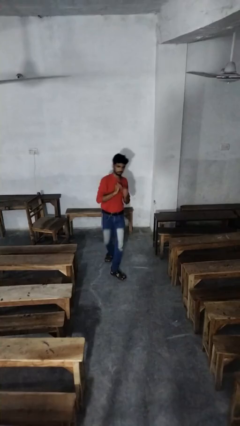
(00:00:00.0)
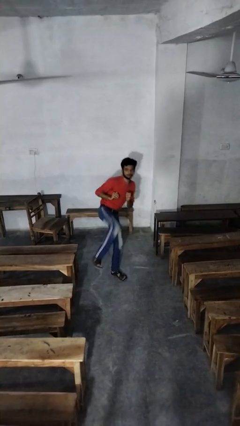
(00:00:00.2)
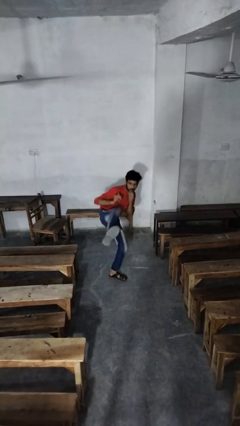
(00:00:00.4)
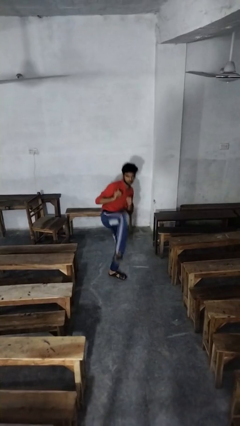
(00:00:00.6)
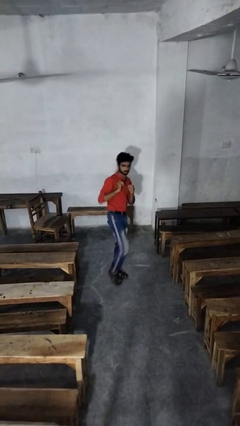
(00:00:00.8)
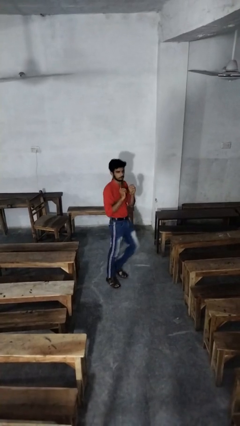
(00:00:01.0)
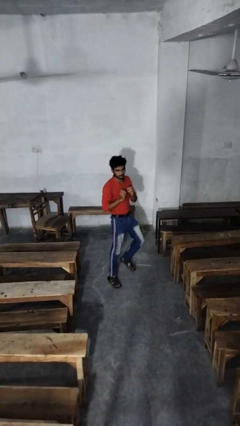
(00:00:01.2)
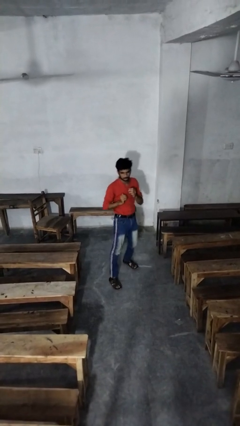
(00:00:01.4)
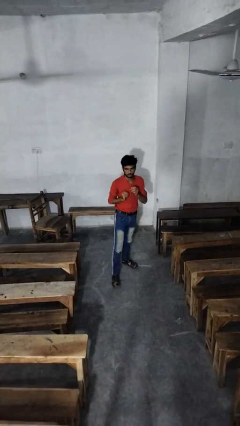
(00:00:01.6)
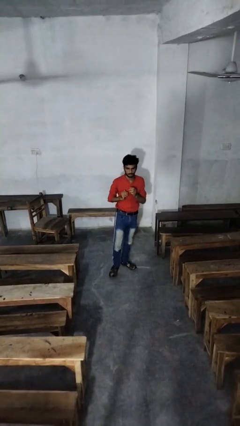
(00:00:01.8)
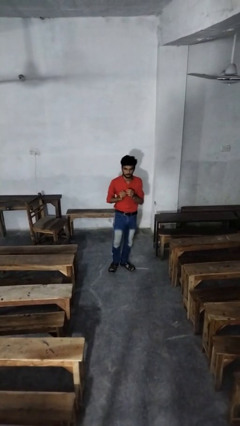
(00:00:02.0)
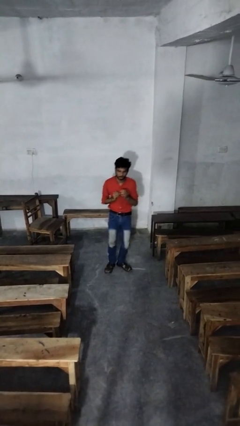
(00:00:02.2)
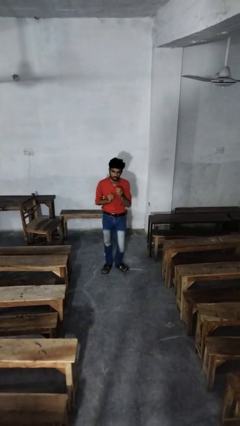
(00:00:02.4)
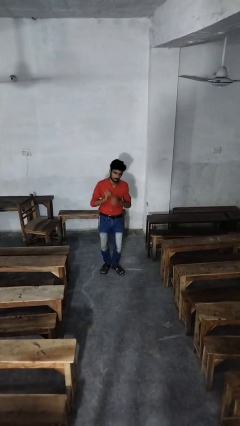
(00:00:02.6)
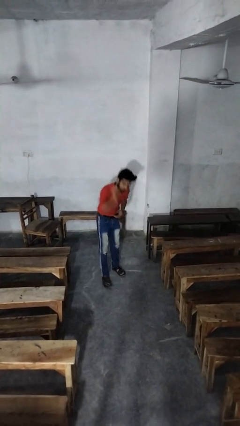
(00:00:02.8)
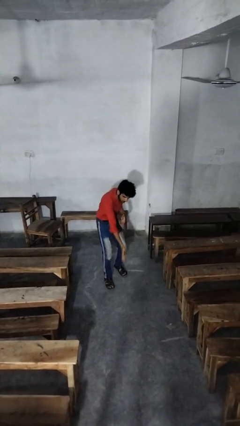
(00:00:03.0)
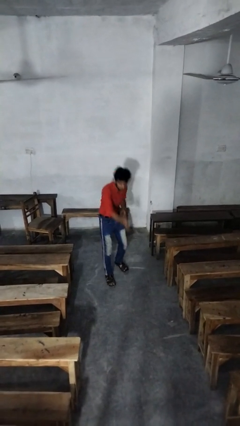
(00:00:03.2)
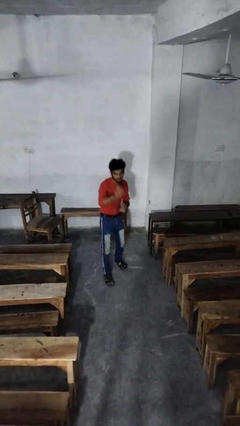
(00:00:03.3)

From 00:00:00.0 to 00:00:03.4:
person karate kicks

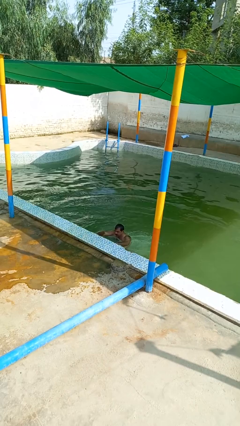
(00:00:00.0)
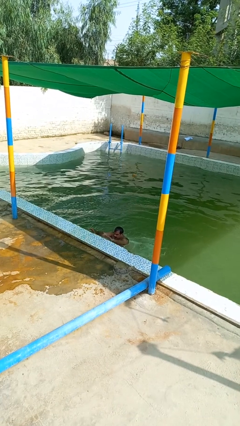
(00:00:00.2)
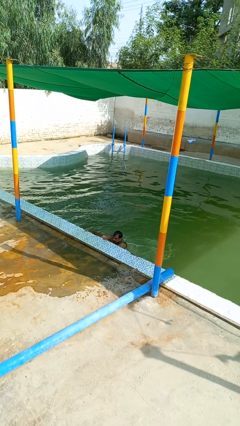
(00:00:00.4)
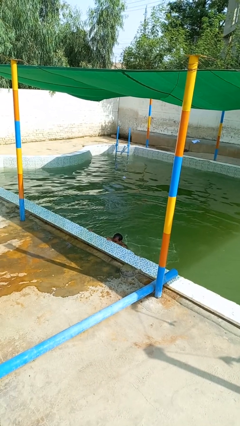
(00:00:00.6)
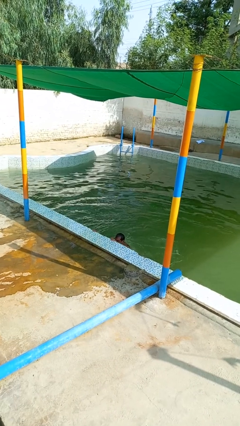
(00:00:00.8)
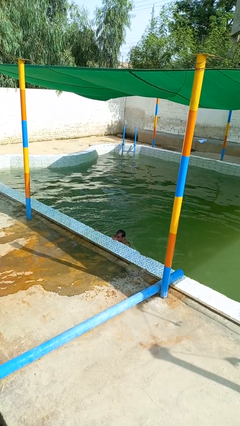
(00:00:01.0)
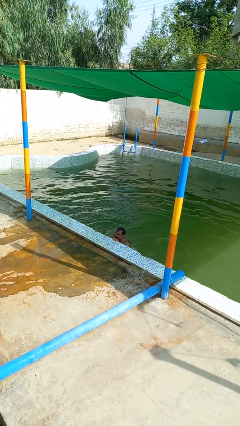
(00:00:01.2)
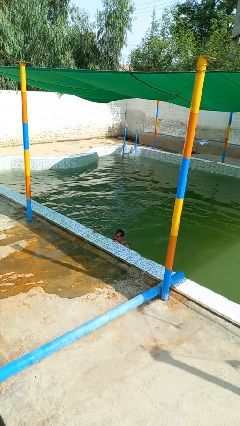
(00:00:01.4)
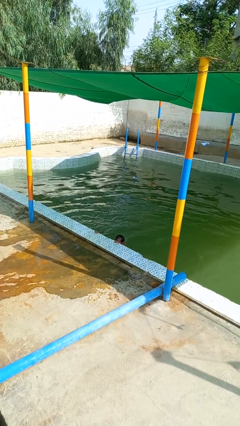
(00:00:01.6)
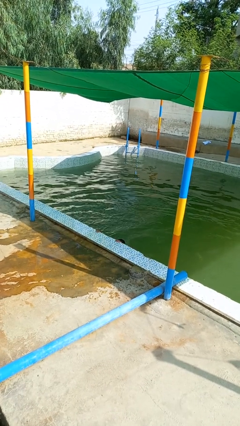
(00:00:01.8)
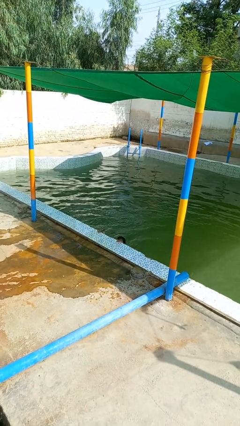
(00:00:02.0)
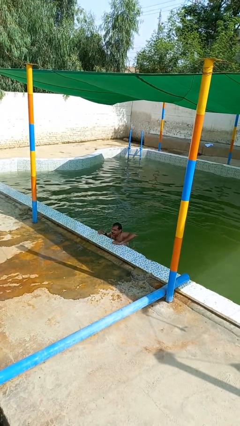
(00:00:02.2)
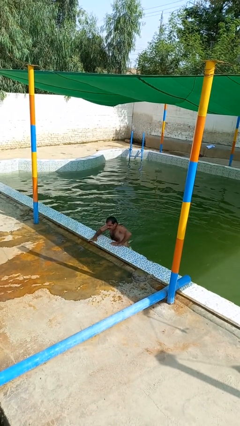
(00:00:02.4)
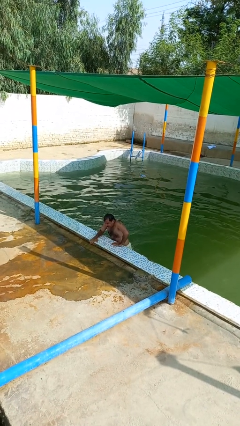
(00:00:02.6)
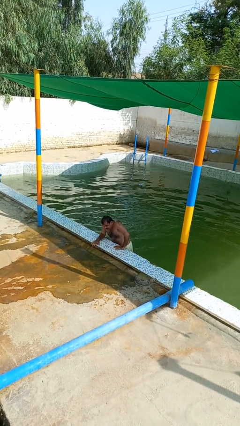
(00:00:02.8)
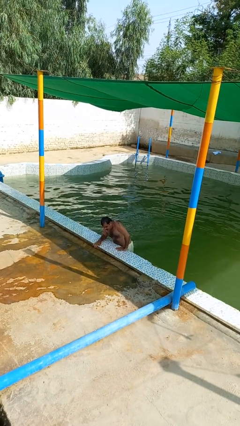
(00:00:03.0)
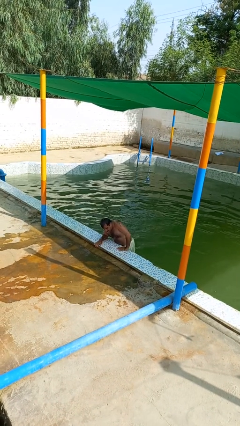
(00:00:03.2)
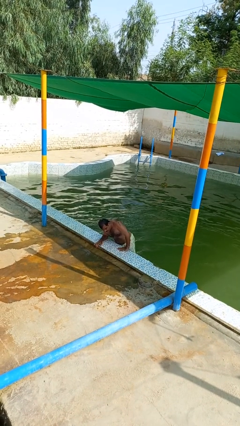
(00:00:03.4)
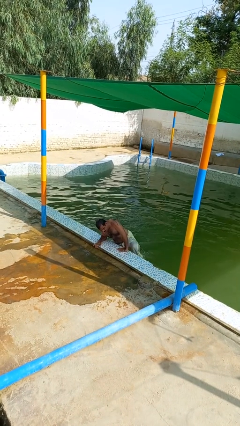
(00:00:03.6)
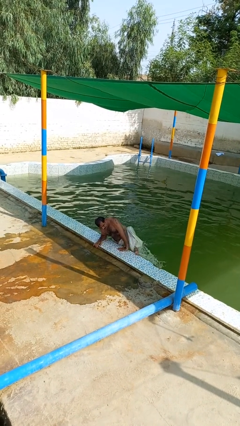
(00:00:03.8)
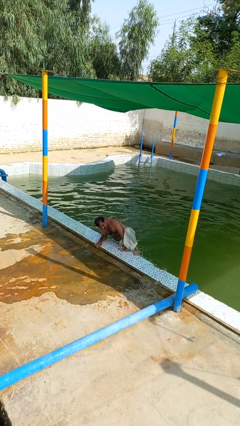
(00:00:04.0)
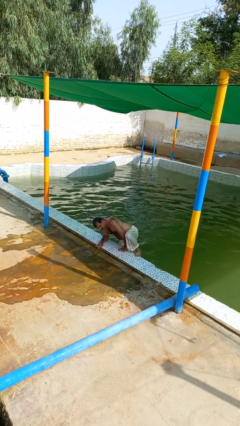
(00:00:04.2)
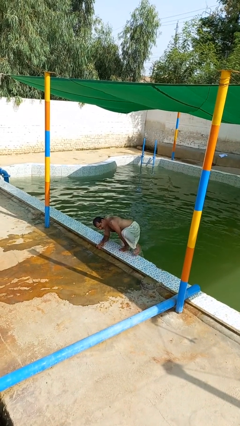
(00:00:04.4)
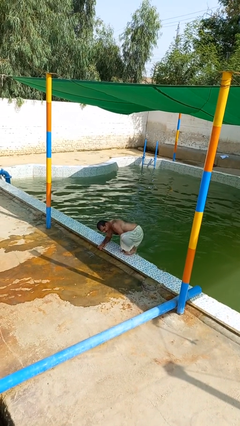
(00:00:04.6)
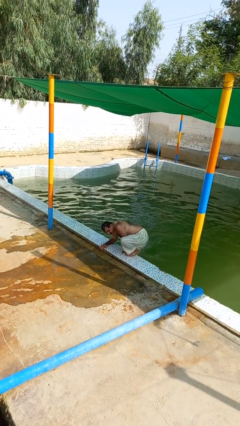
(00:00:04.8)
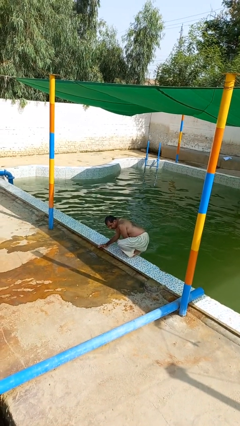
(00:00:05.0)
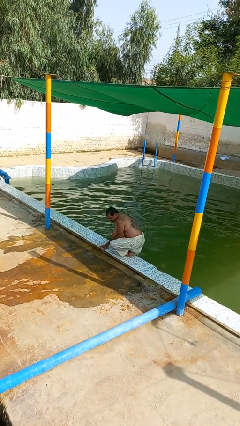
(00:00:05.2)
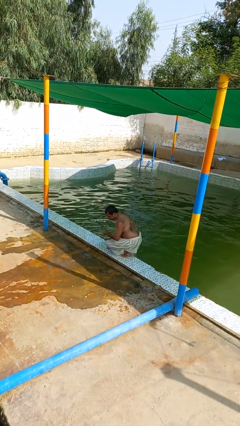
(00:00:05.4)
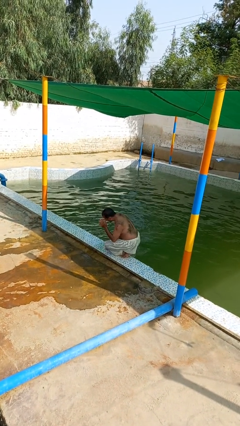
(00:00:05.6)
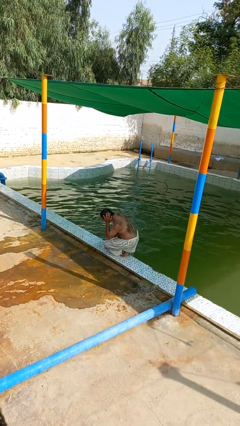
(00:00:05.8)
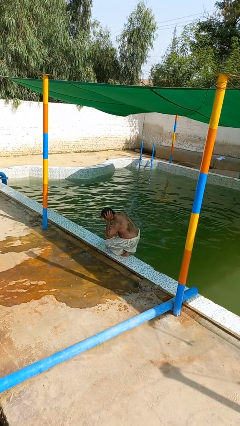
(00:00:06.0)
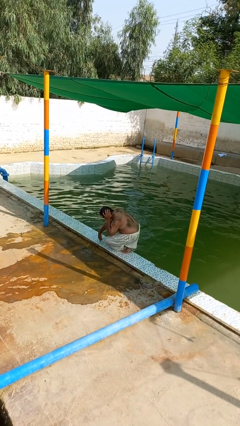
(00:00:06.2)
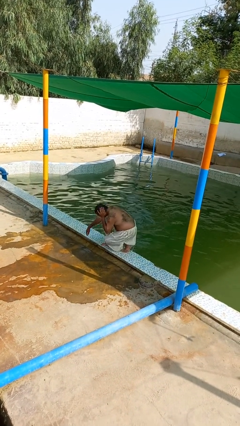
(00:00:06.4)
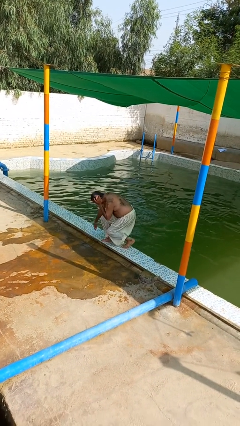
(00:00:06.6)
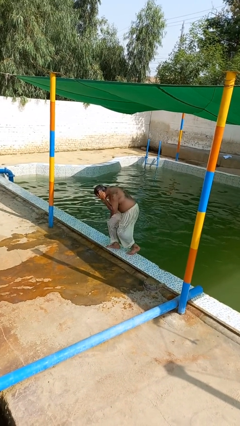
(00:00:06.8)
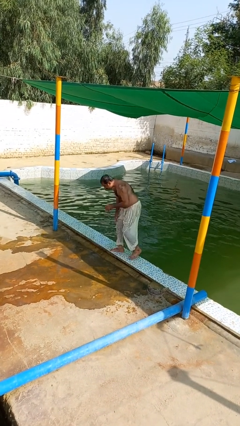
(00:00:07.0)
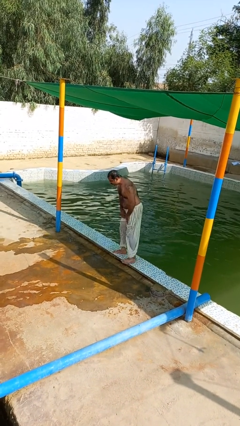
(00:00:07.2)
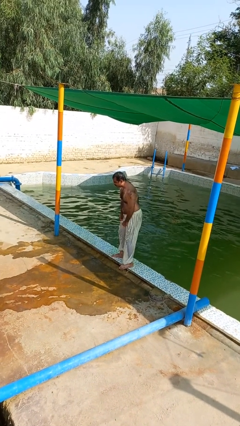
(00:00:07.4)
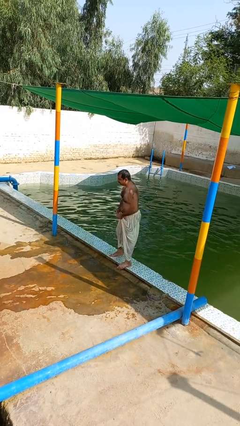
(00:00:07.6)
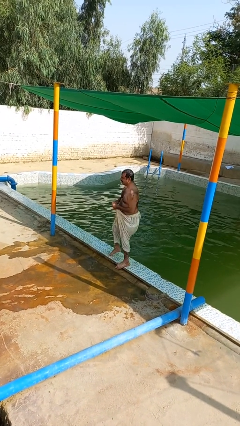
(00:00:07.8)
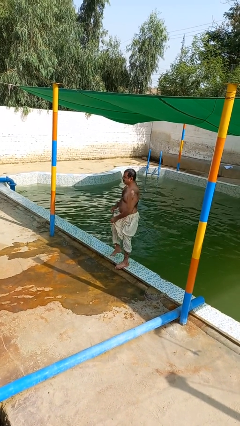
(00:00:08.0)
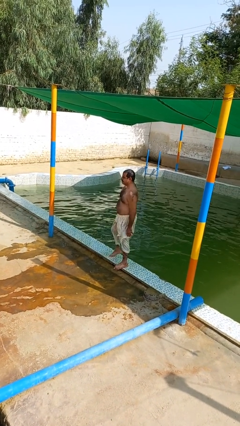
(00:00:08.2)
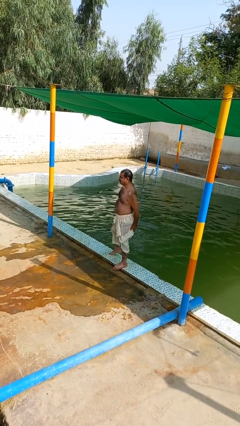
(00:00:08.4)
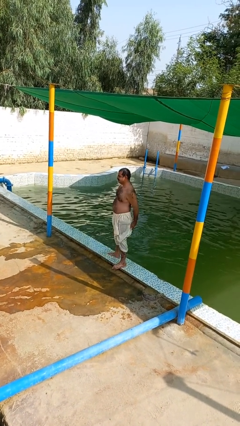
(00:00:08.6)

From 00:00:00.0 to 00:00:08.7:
person exits pool

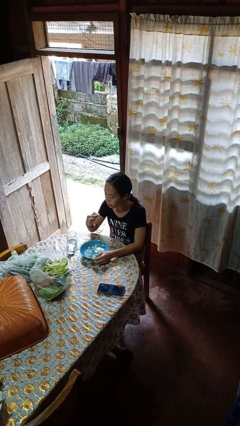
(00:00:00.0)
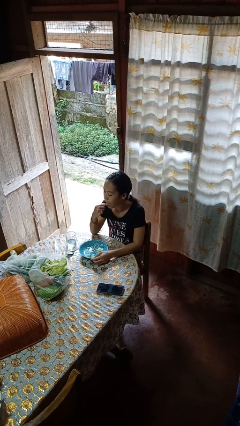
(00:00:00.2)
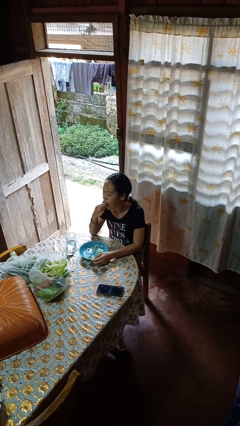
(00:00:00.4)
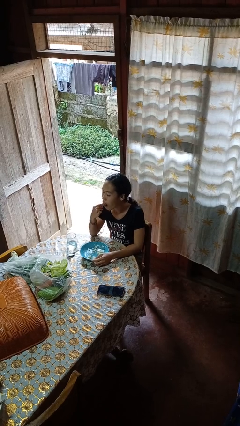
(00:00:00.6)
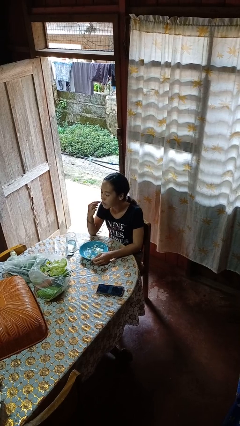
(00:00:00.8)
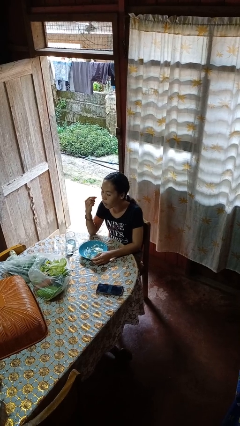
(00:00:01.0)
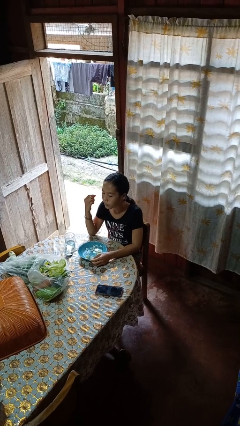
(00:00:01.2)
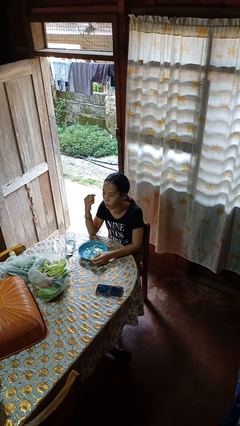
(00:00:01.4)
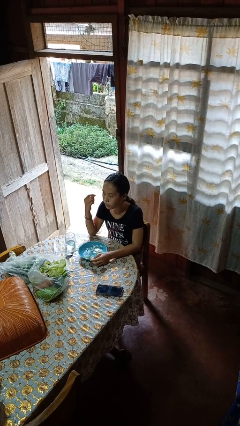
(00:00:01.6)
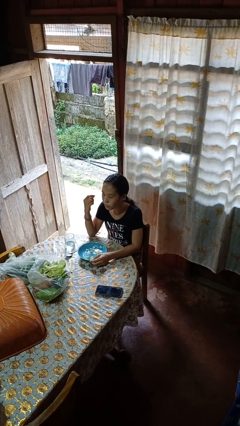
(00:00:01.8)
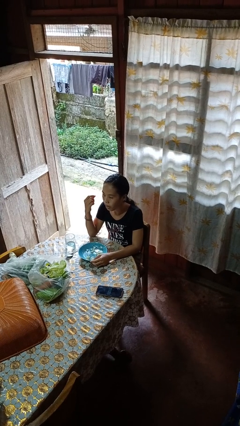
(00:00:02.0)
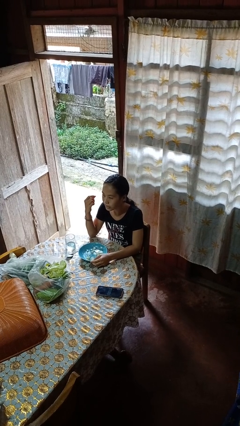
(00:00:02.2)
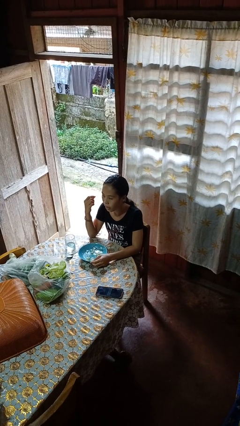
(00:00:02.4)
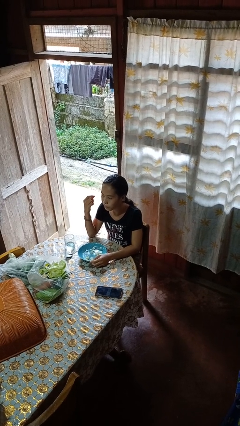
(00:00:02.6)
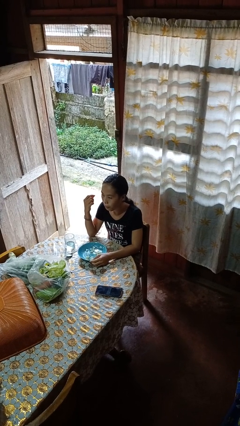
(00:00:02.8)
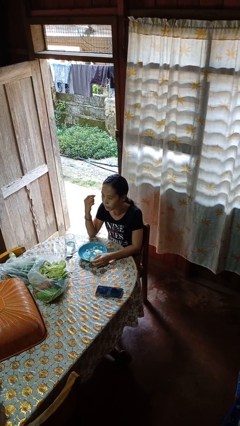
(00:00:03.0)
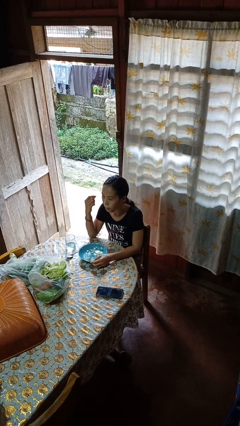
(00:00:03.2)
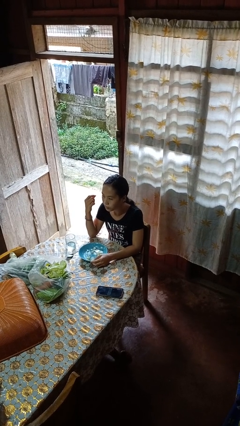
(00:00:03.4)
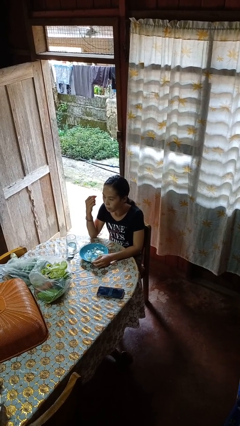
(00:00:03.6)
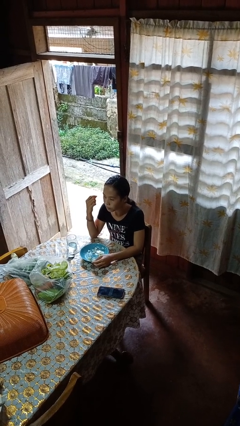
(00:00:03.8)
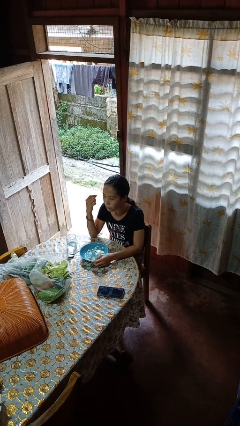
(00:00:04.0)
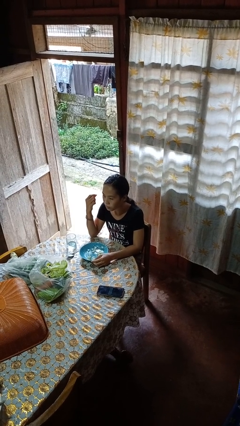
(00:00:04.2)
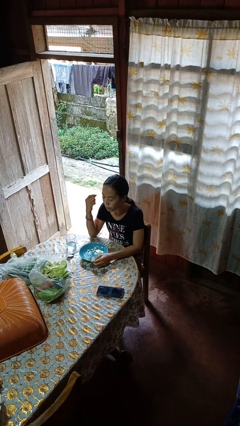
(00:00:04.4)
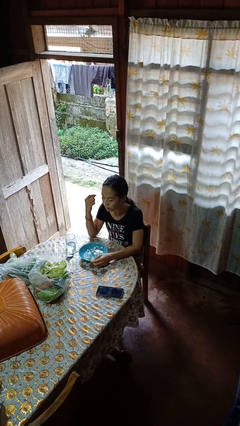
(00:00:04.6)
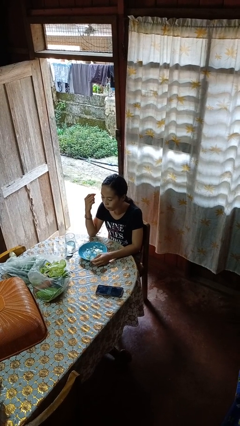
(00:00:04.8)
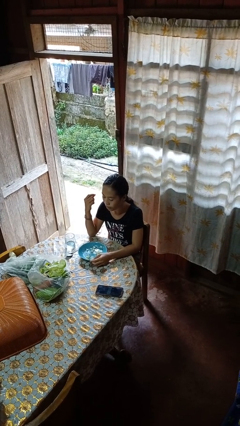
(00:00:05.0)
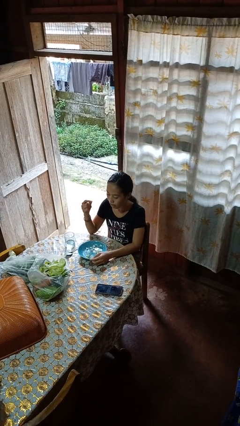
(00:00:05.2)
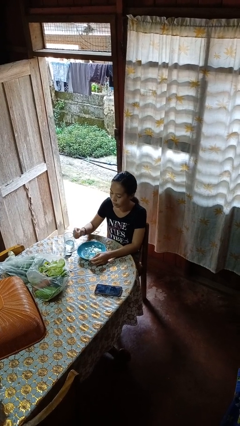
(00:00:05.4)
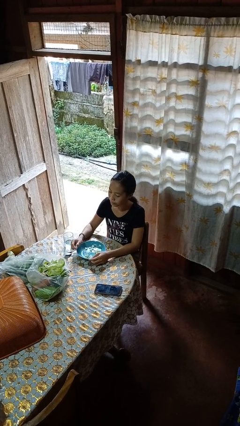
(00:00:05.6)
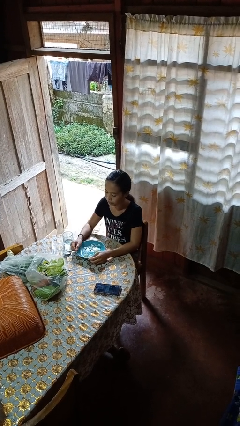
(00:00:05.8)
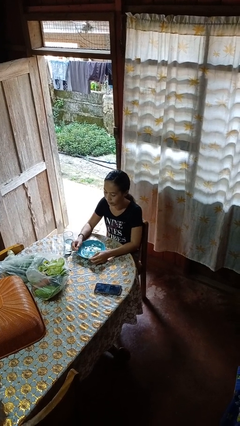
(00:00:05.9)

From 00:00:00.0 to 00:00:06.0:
person eats with hands
